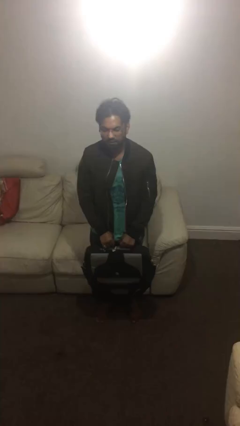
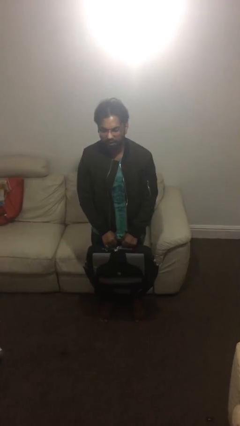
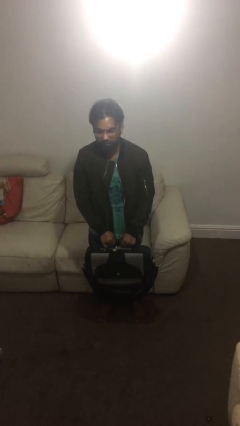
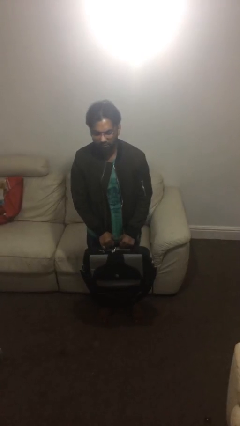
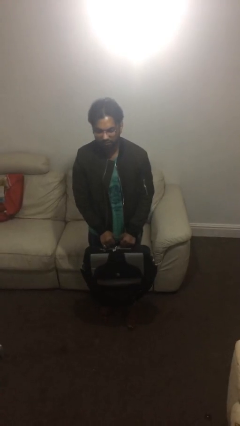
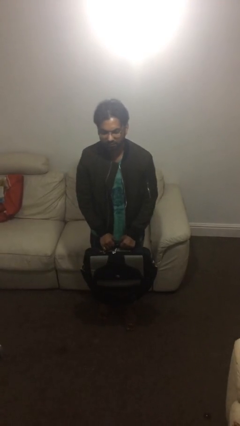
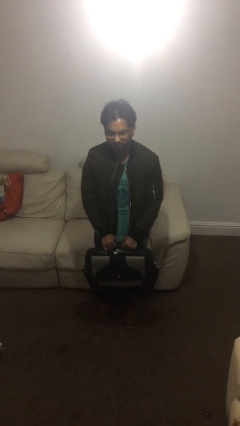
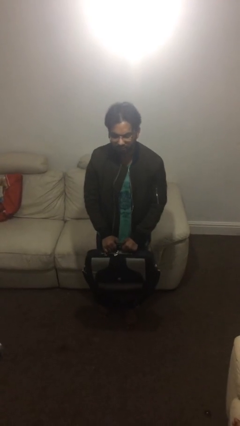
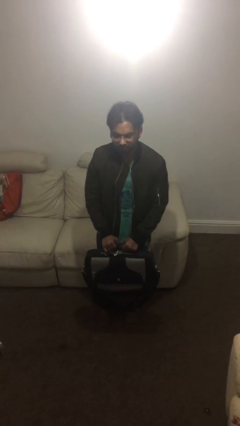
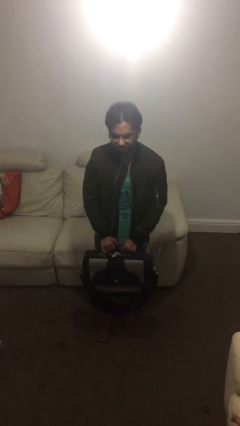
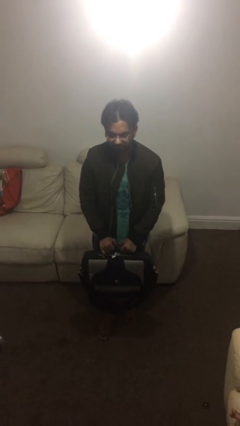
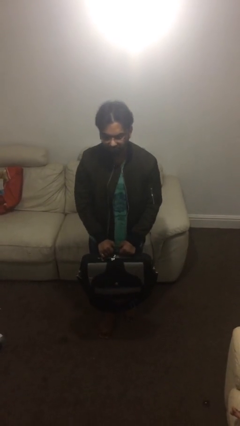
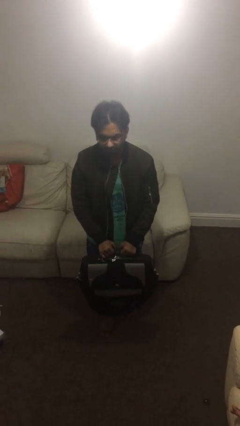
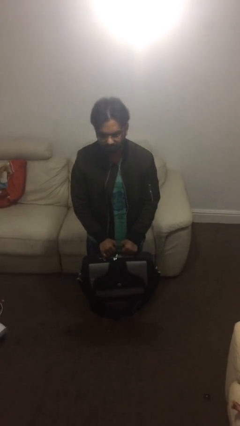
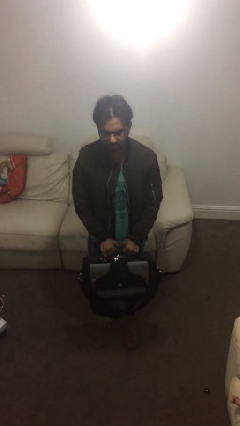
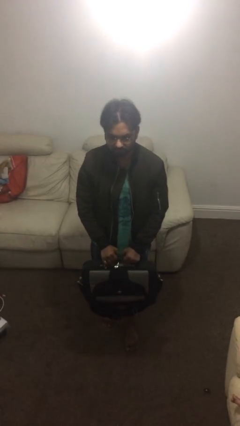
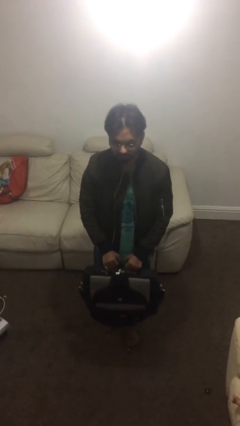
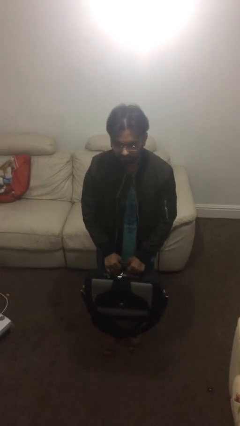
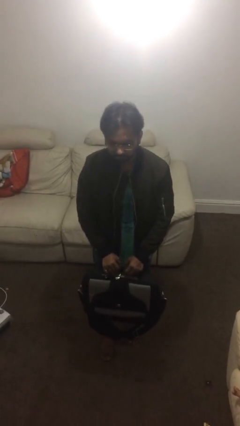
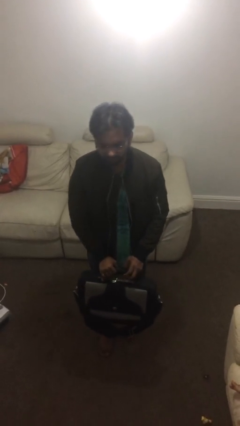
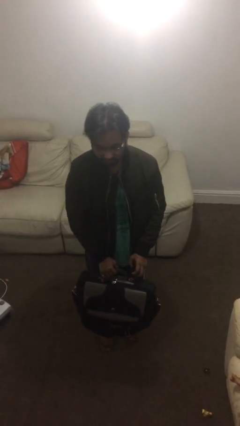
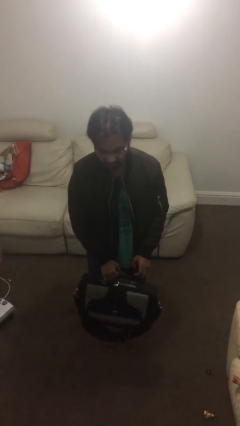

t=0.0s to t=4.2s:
person carries heavy object

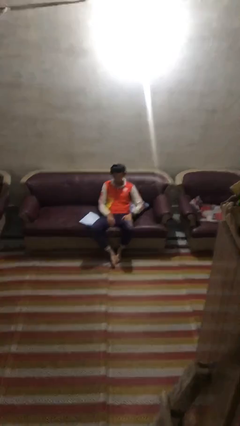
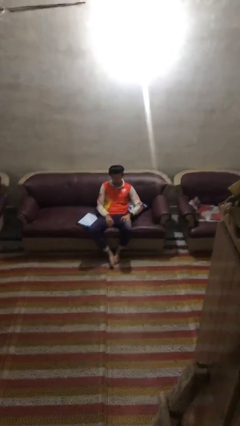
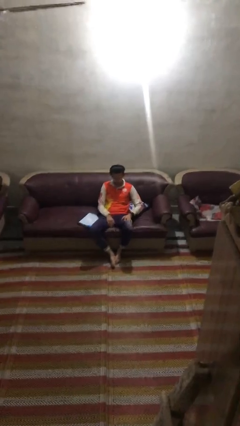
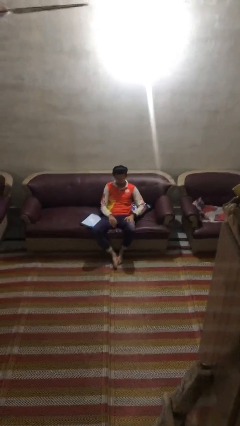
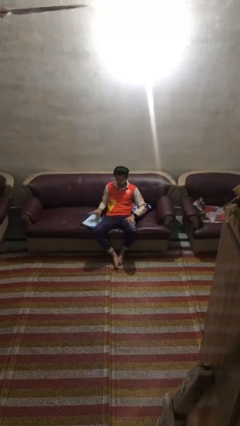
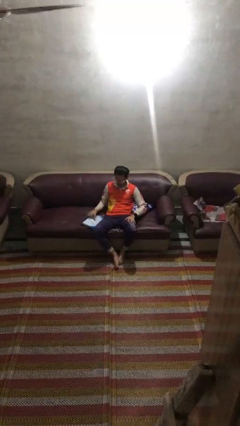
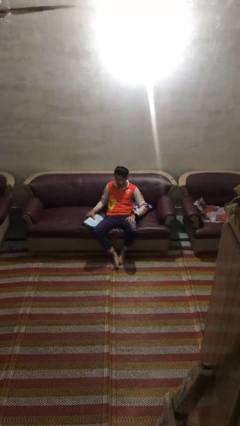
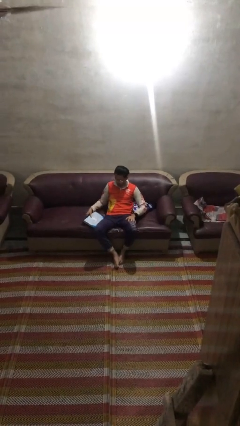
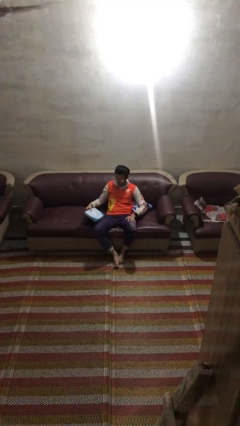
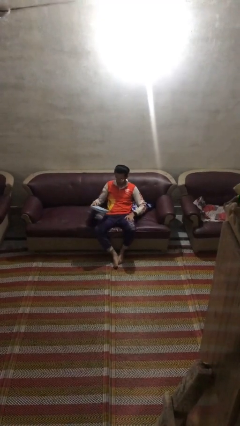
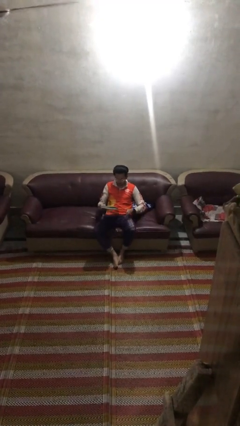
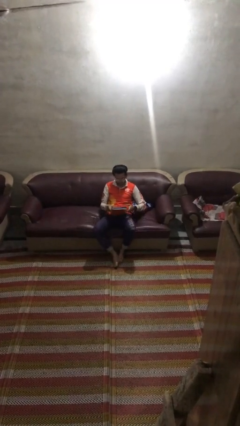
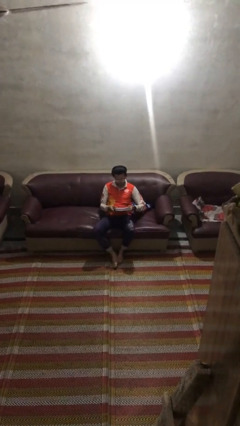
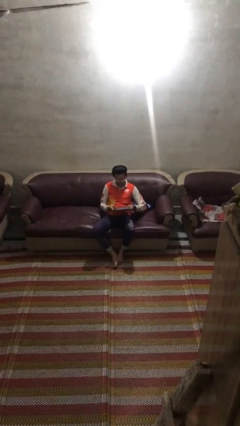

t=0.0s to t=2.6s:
person picks up object from couch

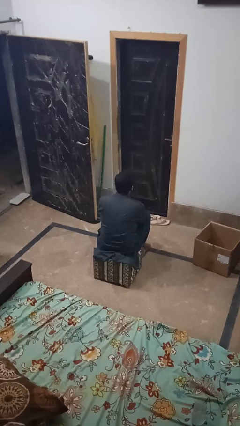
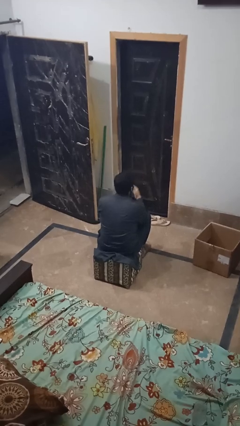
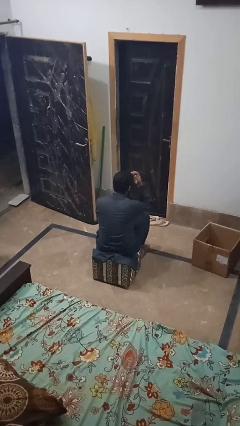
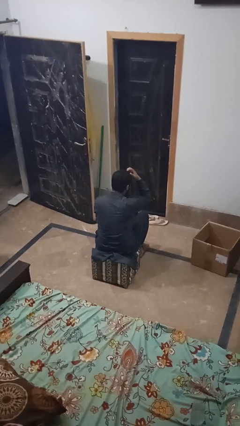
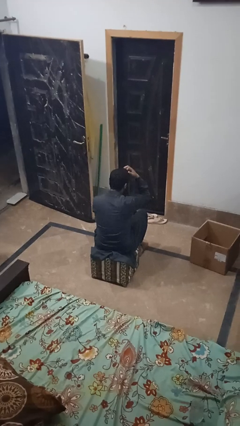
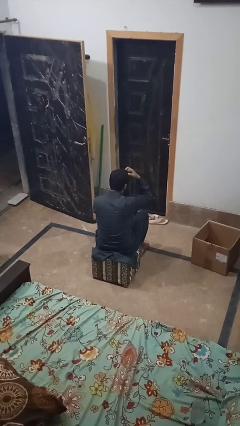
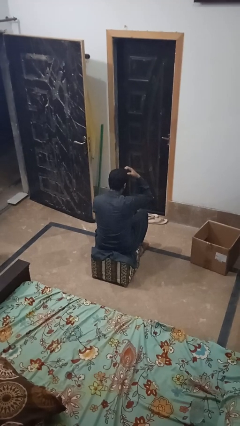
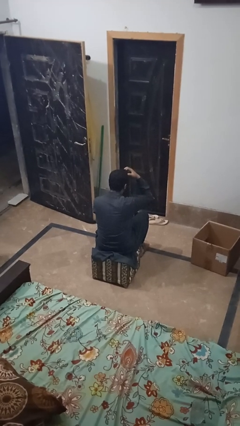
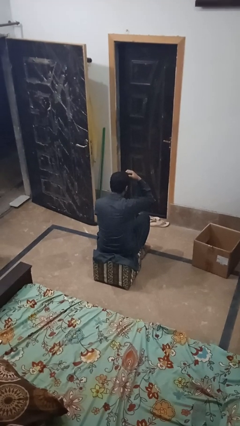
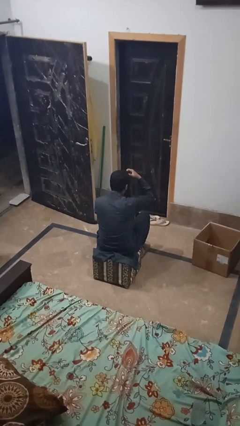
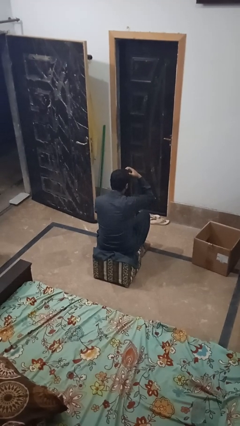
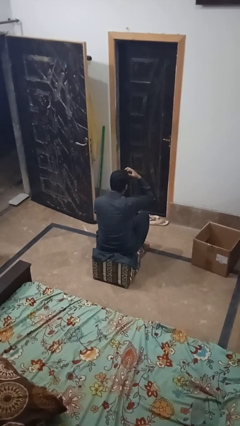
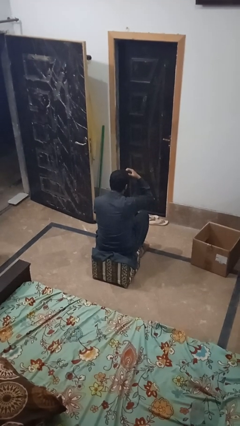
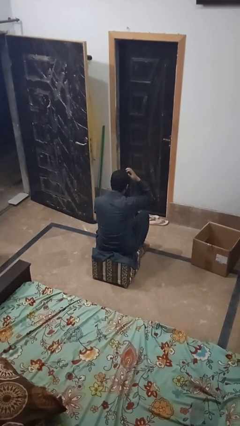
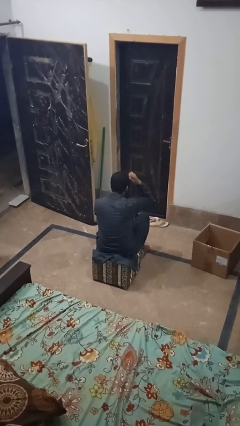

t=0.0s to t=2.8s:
person strokes hair

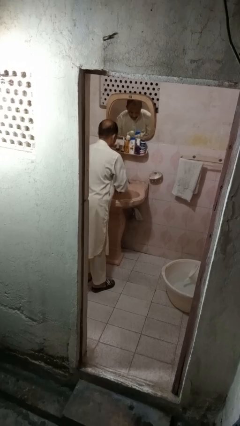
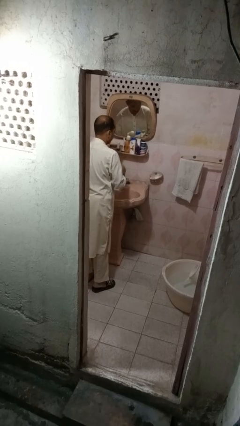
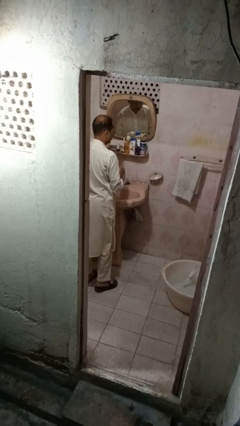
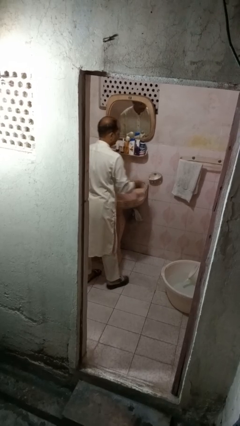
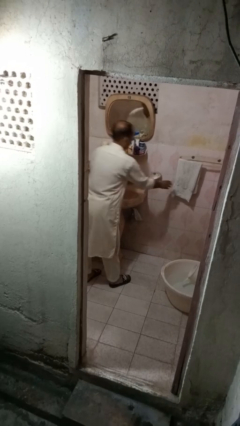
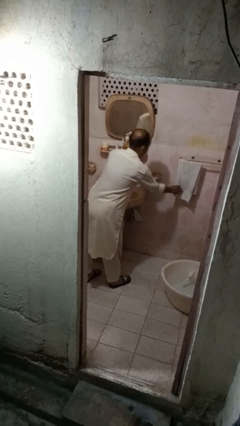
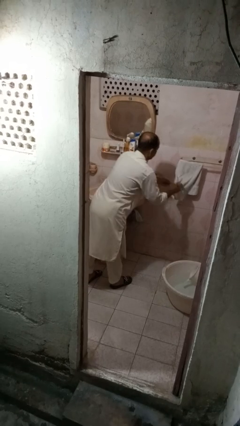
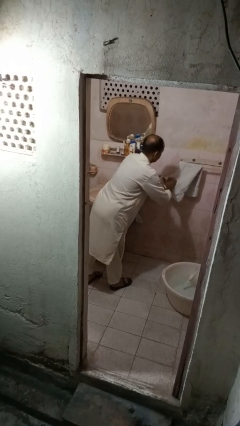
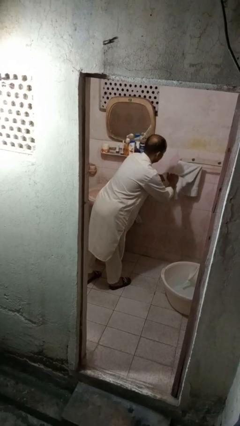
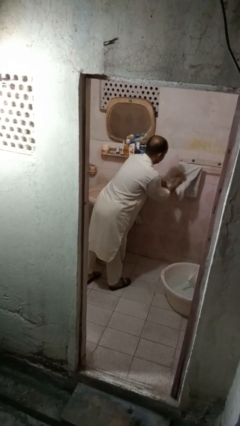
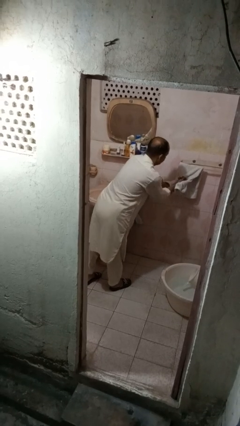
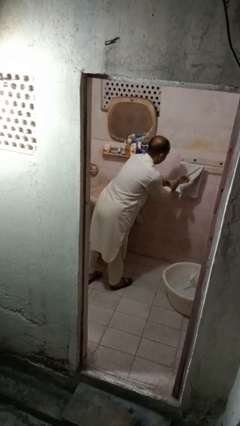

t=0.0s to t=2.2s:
person dries hands with towel

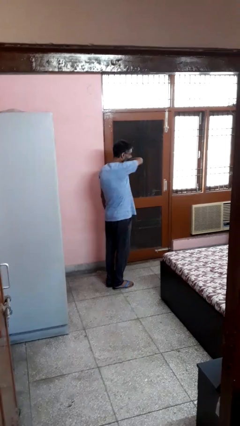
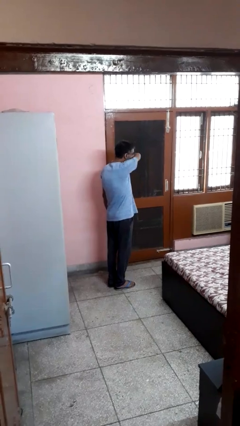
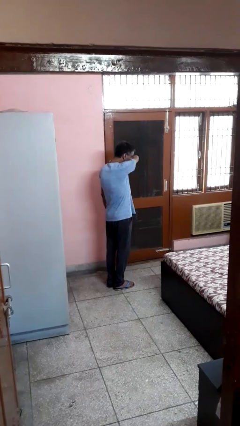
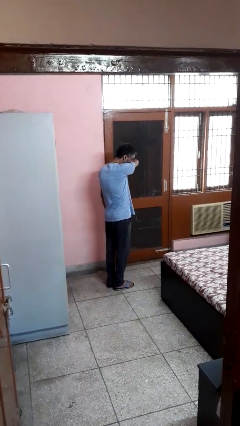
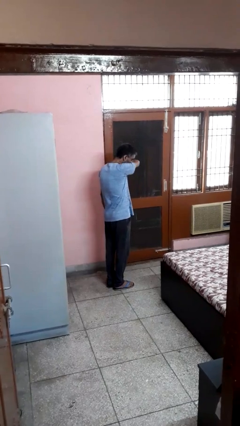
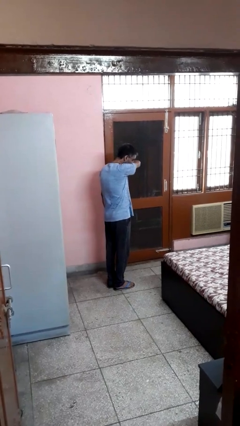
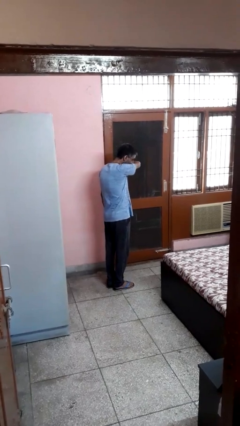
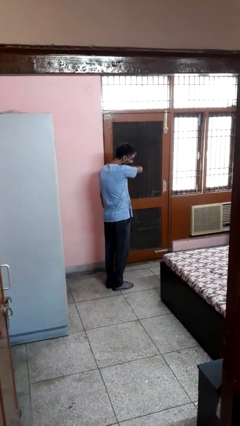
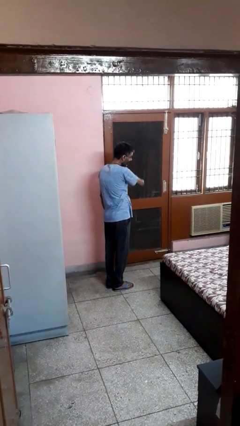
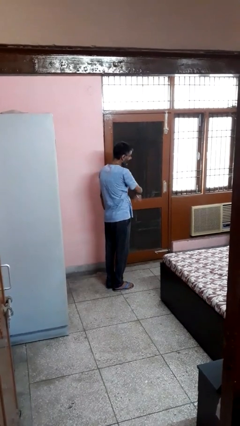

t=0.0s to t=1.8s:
person sneezes into arm

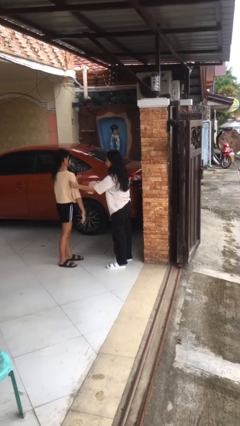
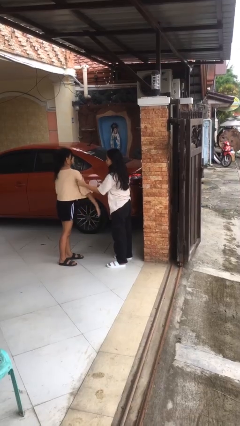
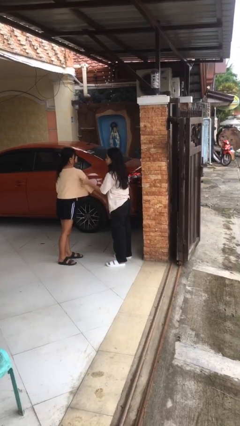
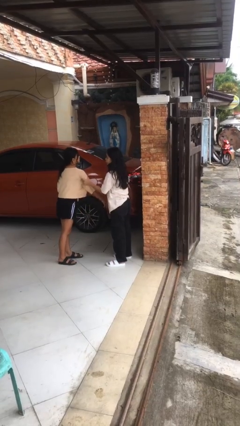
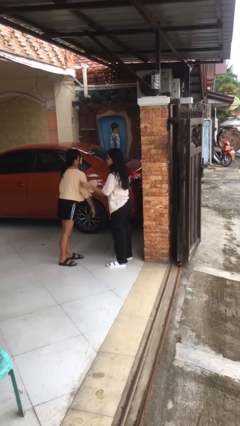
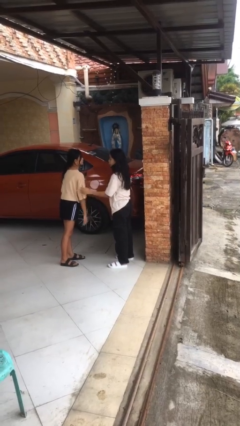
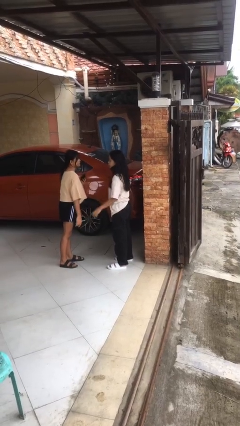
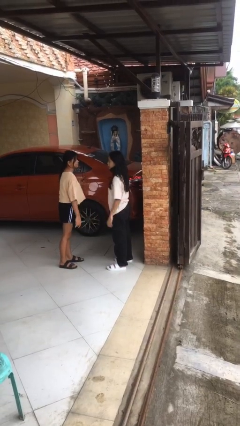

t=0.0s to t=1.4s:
person grabs person by bicep

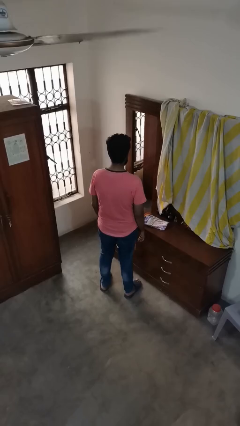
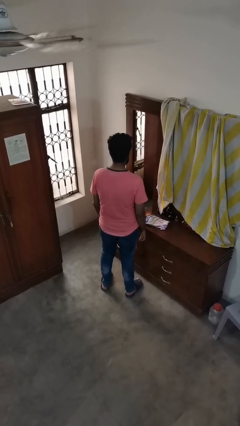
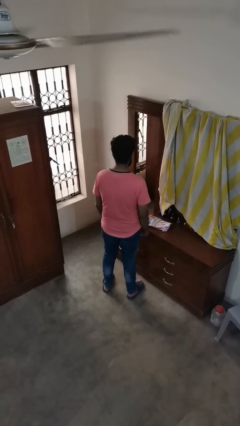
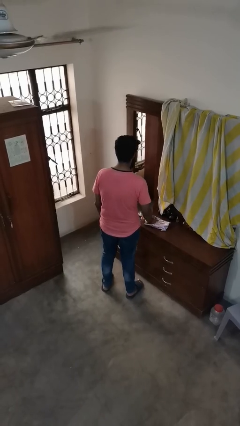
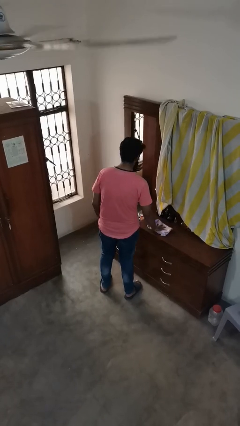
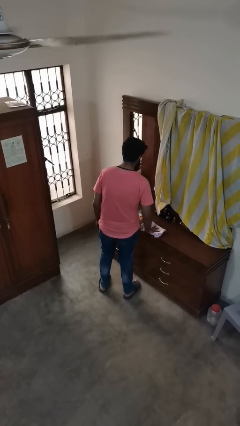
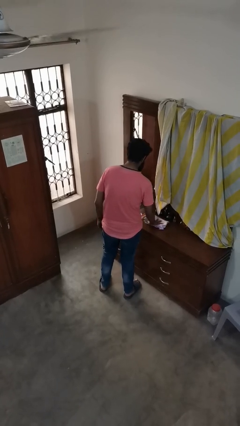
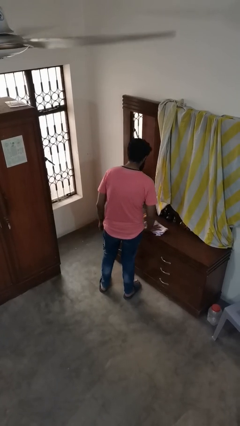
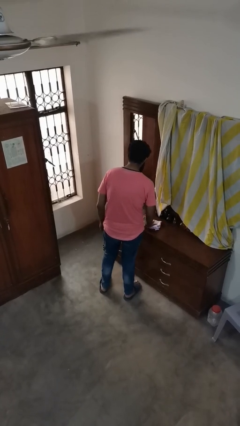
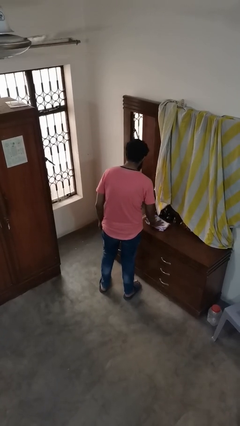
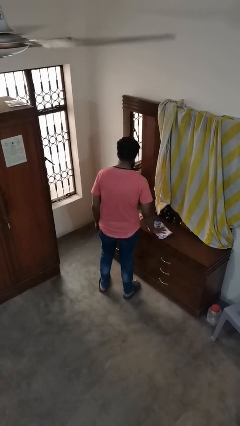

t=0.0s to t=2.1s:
person cleans table with rag
